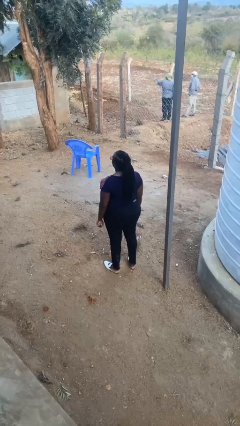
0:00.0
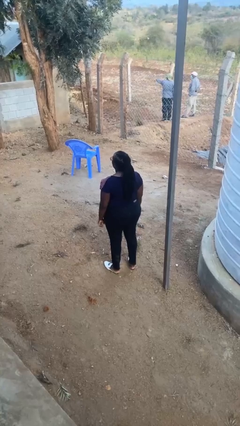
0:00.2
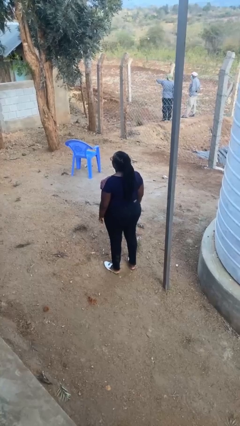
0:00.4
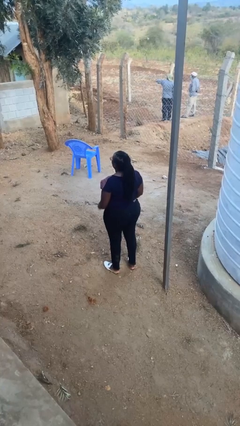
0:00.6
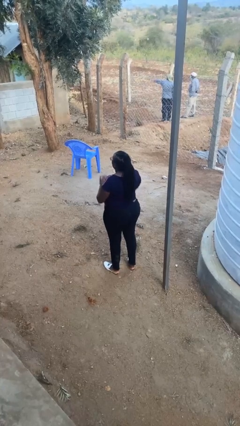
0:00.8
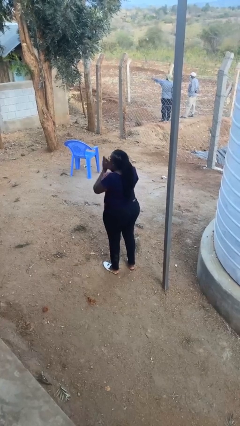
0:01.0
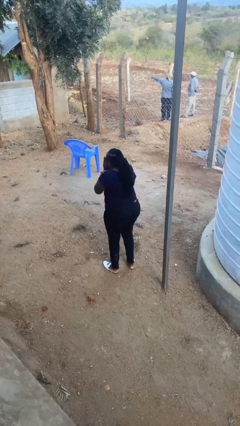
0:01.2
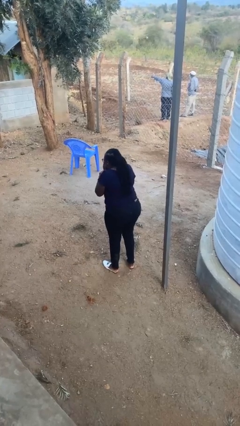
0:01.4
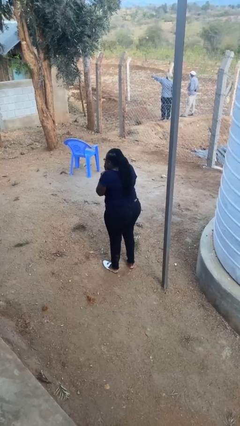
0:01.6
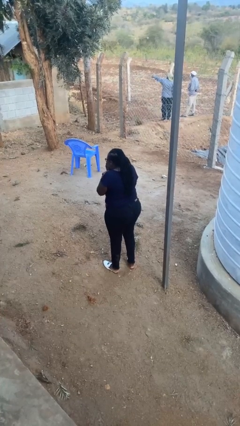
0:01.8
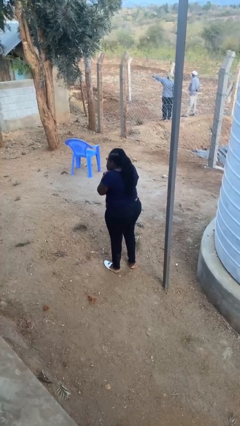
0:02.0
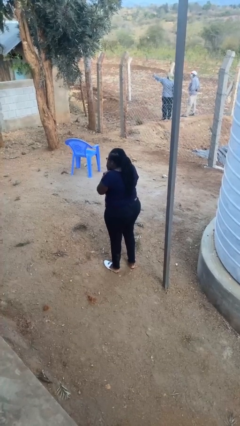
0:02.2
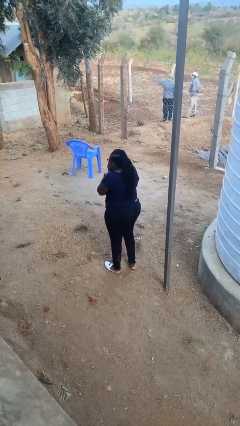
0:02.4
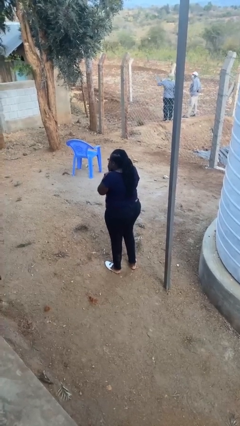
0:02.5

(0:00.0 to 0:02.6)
person sneezes into hand

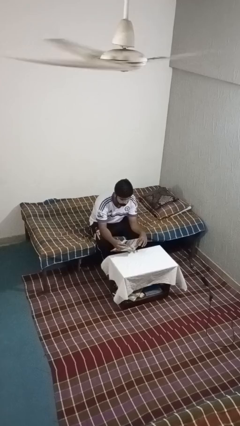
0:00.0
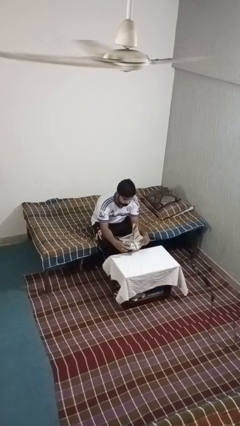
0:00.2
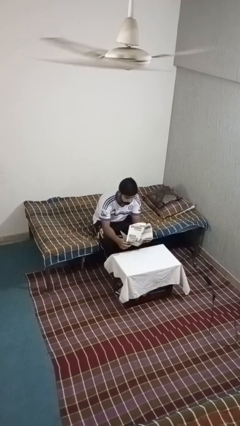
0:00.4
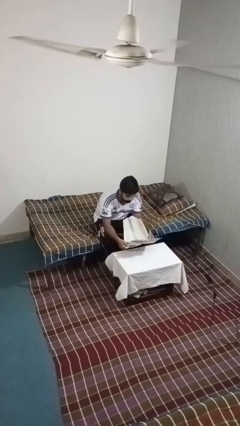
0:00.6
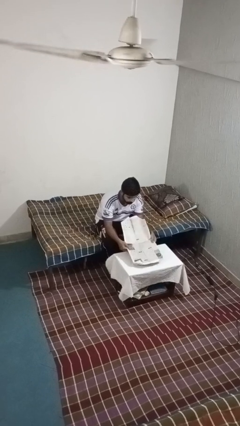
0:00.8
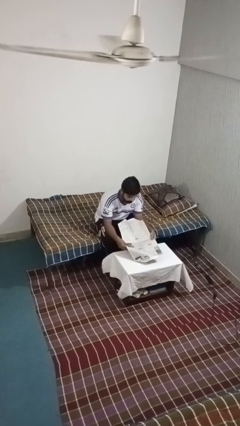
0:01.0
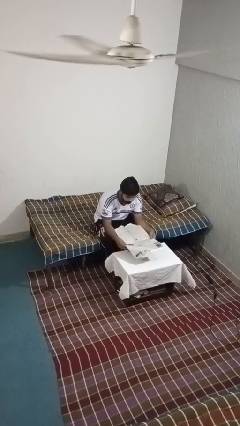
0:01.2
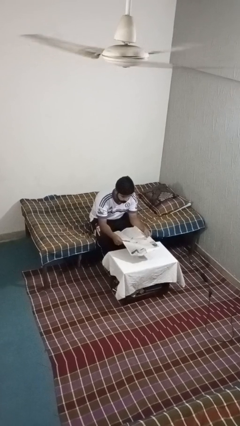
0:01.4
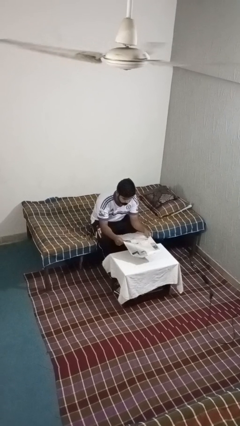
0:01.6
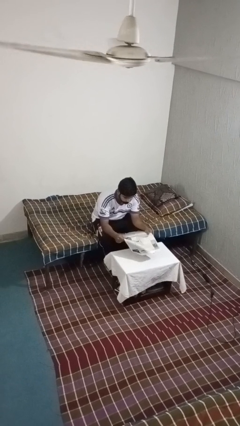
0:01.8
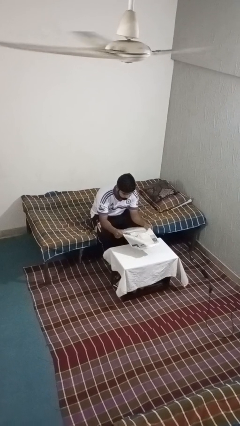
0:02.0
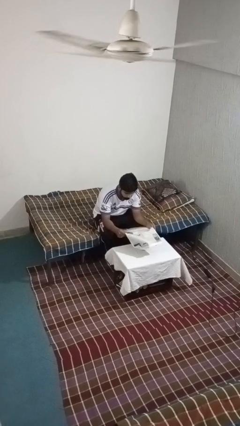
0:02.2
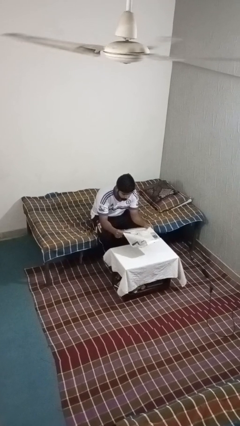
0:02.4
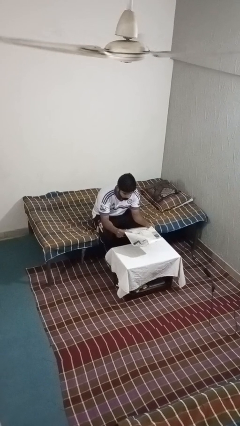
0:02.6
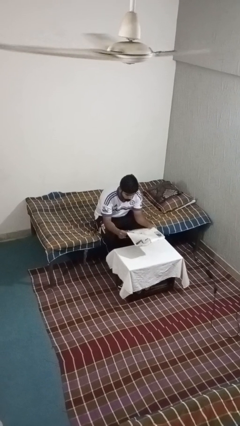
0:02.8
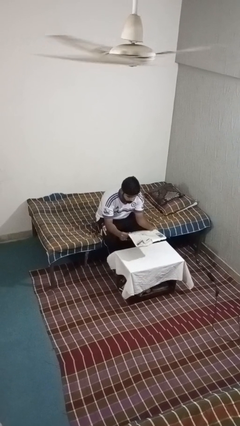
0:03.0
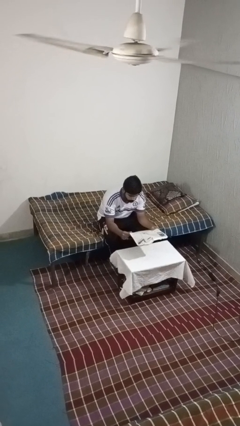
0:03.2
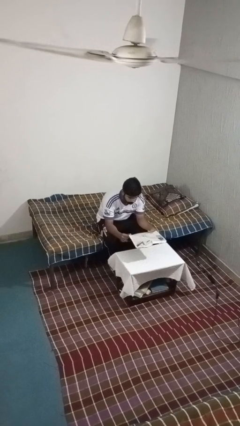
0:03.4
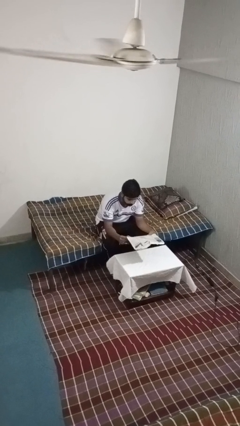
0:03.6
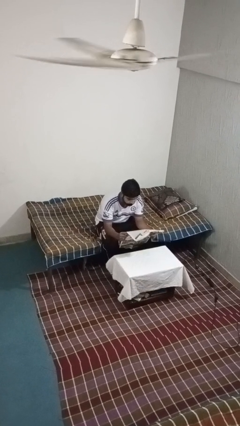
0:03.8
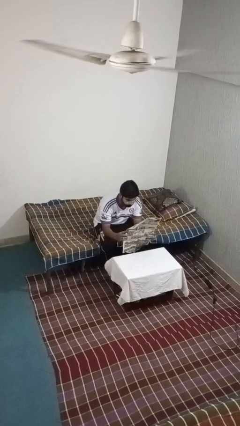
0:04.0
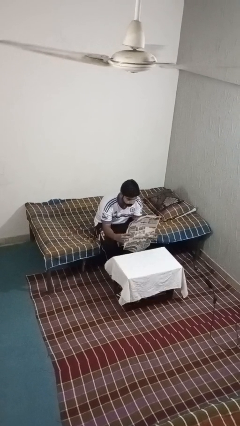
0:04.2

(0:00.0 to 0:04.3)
person reads newspaper

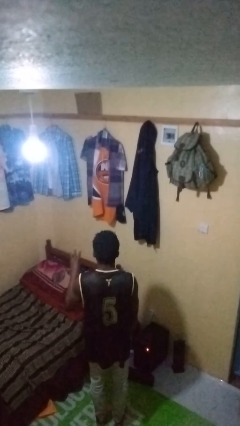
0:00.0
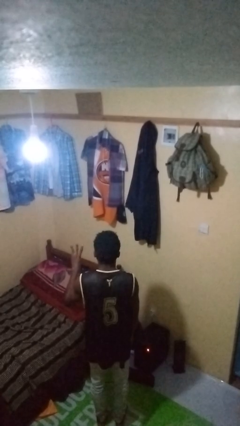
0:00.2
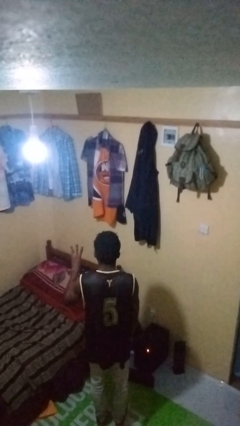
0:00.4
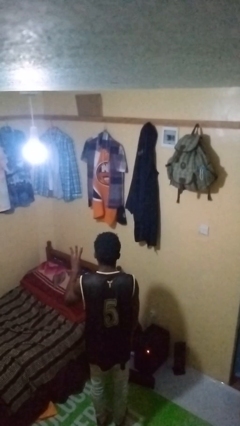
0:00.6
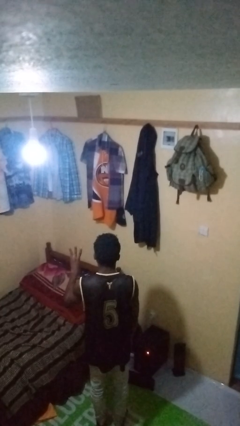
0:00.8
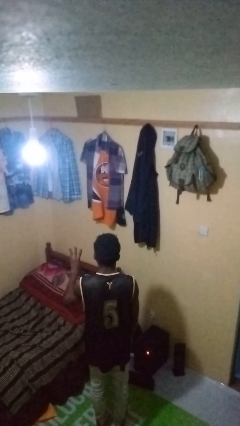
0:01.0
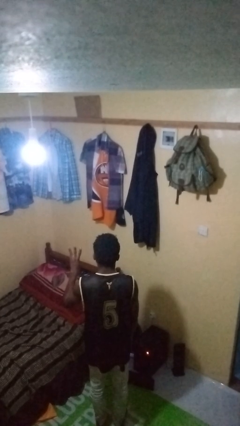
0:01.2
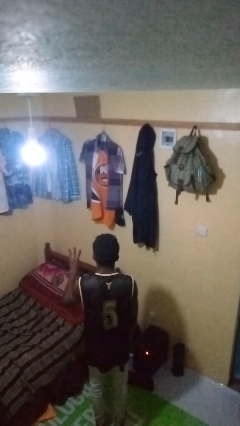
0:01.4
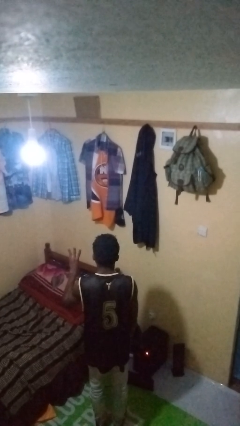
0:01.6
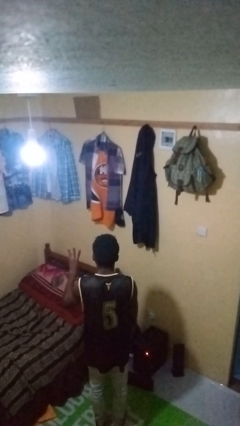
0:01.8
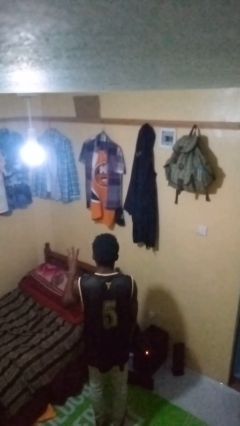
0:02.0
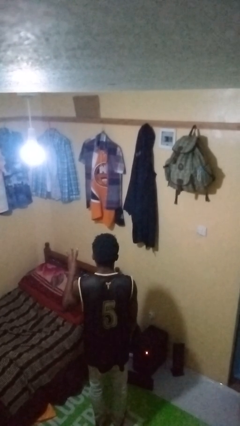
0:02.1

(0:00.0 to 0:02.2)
person gestures number three

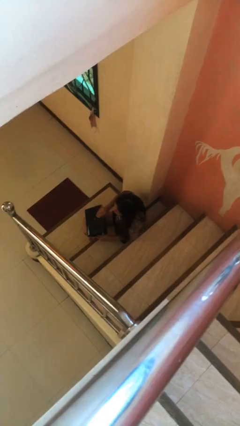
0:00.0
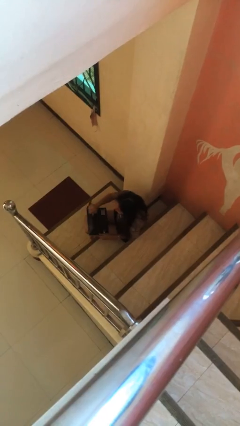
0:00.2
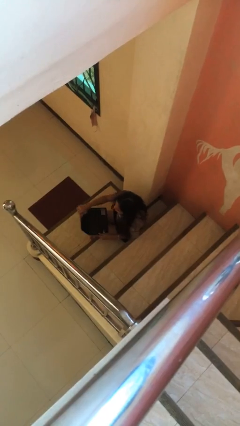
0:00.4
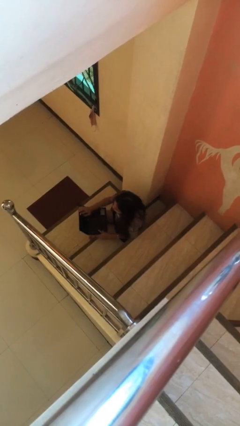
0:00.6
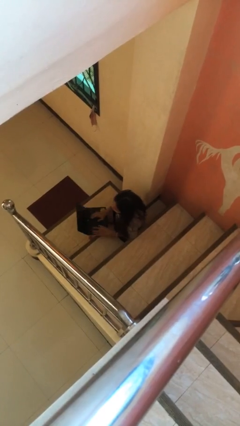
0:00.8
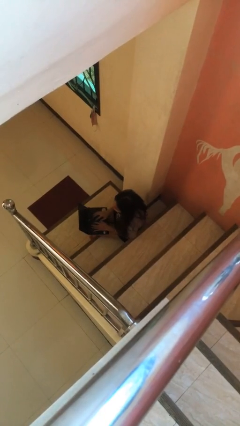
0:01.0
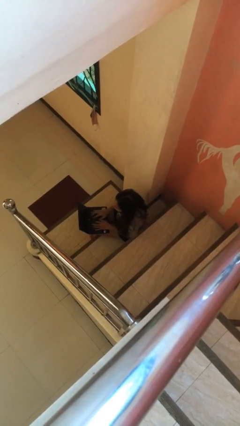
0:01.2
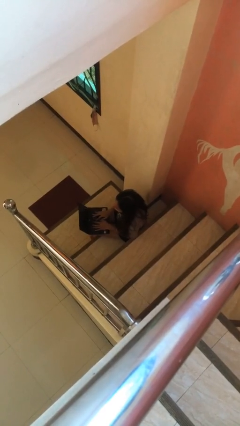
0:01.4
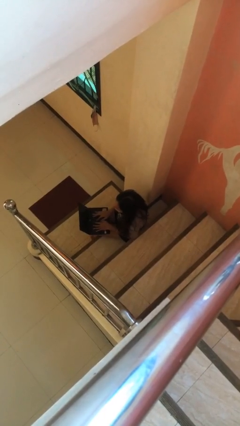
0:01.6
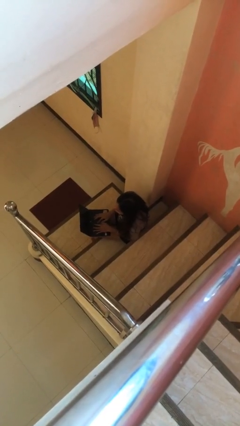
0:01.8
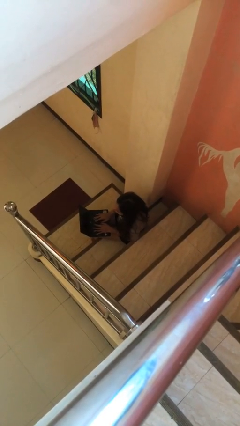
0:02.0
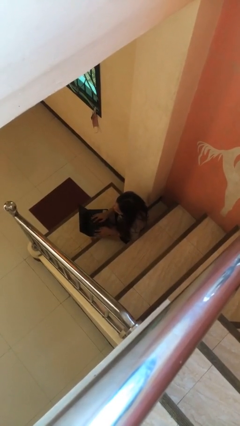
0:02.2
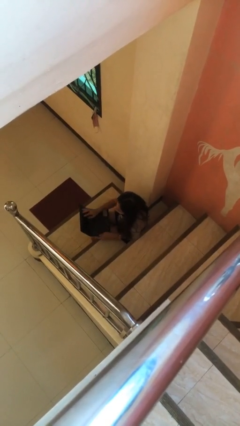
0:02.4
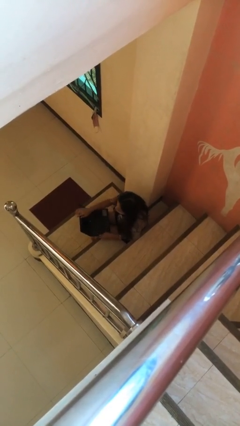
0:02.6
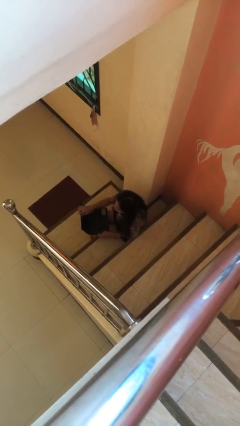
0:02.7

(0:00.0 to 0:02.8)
person interacts with laptop

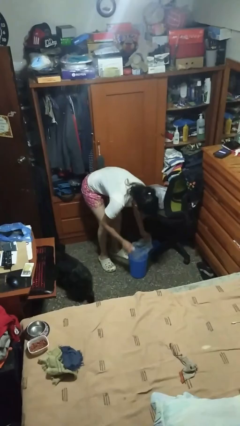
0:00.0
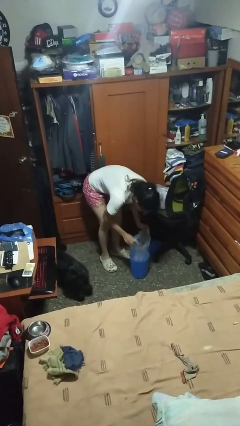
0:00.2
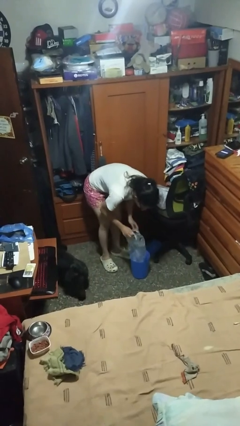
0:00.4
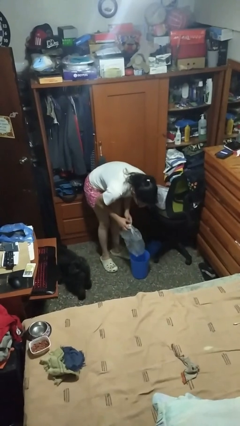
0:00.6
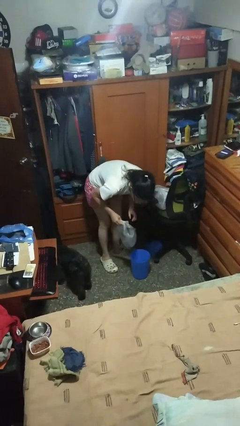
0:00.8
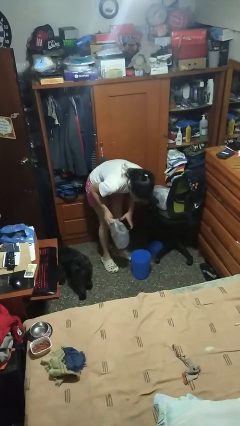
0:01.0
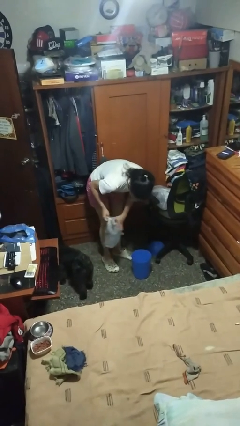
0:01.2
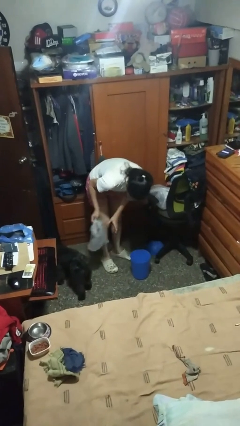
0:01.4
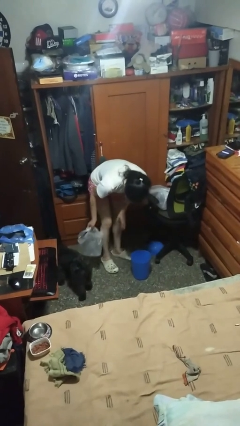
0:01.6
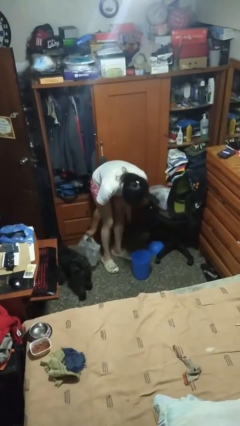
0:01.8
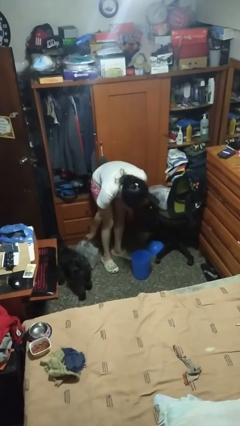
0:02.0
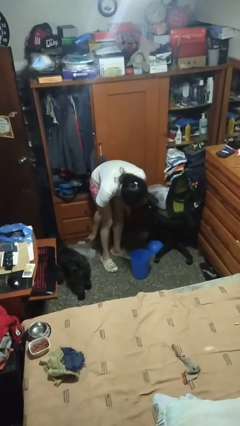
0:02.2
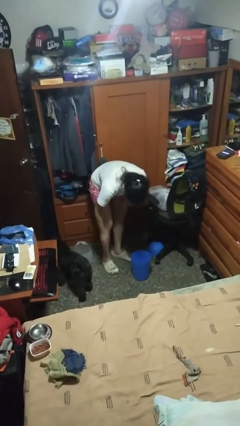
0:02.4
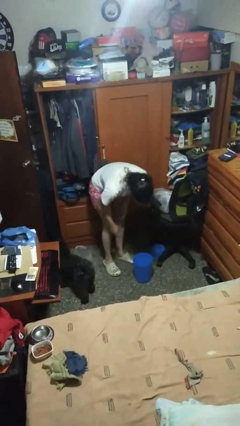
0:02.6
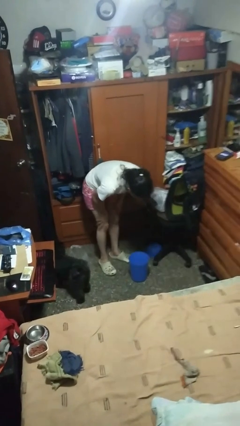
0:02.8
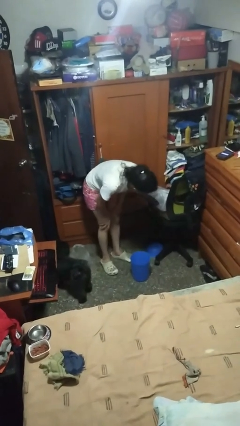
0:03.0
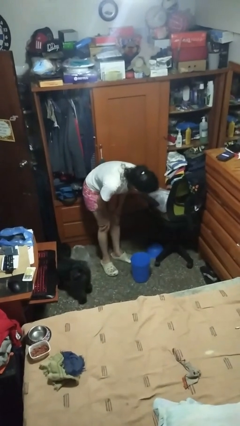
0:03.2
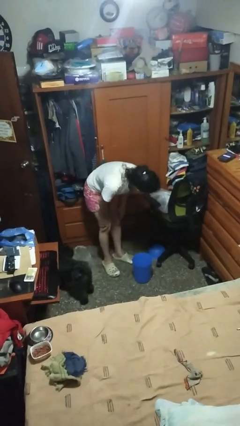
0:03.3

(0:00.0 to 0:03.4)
person removes trashbag from trashcan

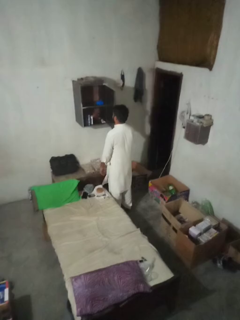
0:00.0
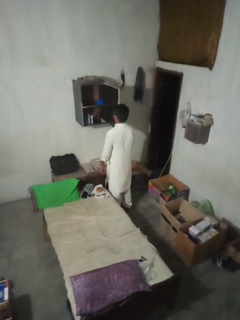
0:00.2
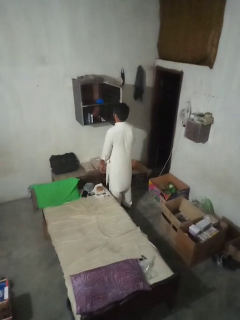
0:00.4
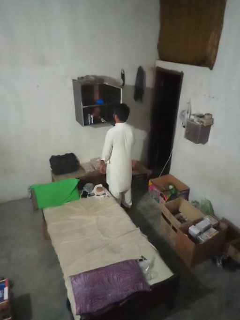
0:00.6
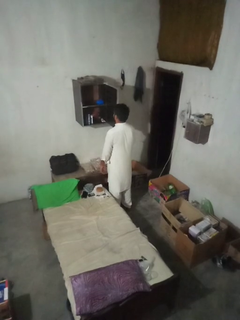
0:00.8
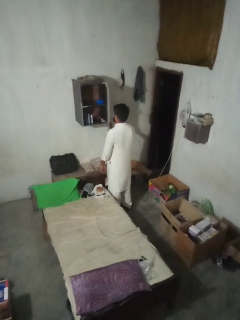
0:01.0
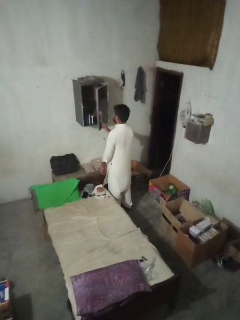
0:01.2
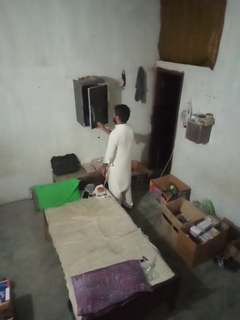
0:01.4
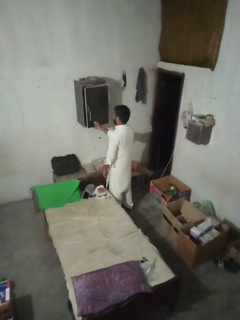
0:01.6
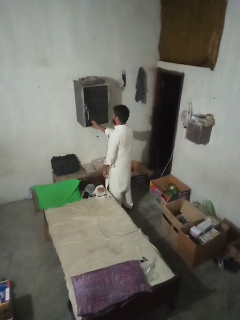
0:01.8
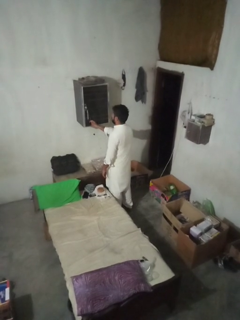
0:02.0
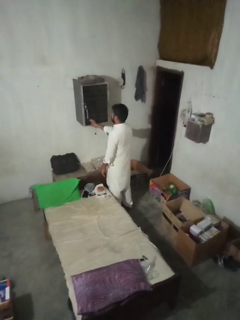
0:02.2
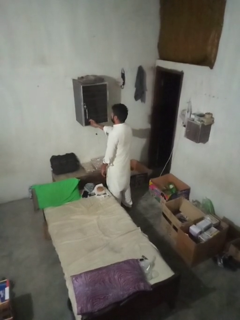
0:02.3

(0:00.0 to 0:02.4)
person closes closet door

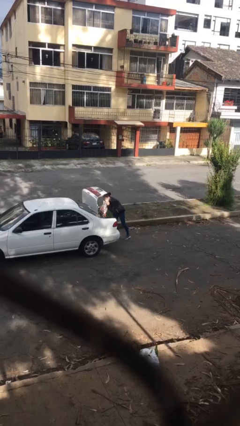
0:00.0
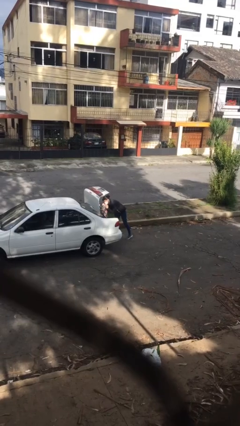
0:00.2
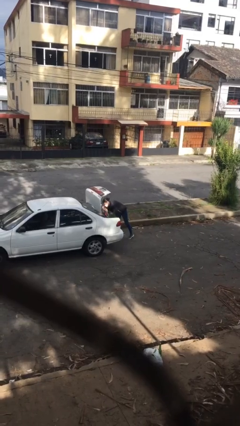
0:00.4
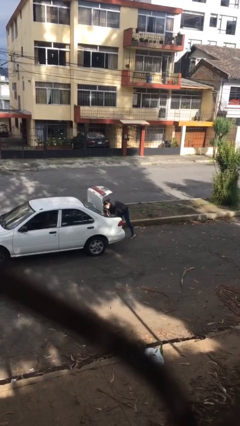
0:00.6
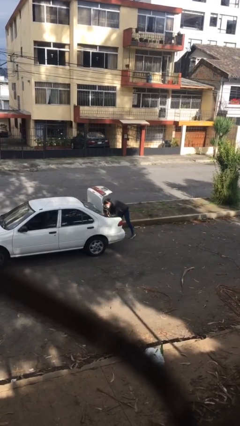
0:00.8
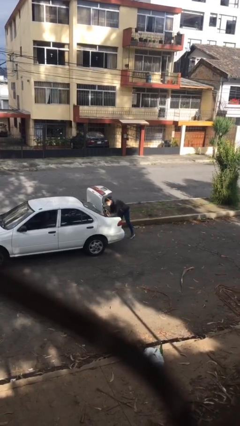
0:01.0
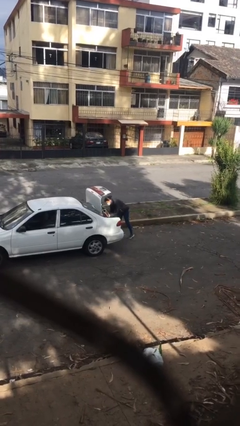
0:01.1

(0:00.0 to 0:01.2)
person loads car
